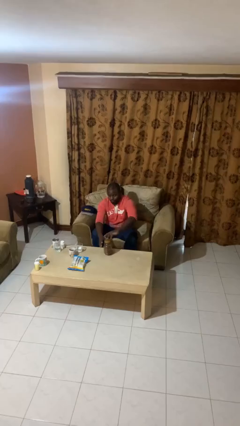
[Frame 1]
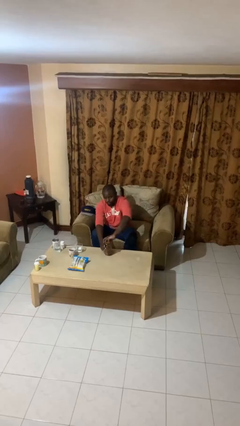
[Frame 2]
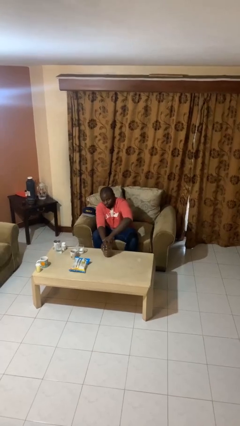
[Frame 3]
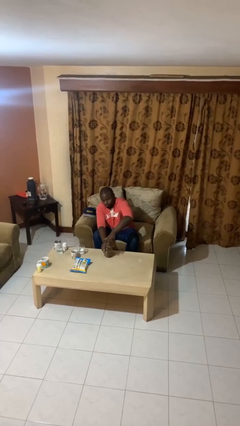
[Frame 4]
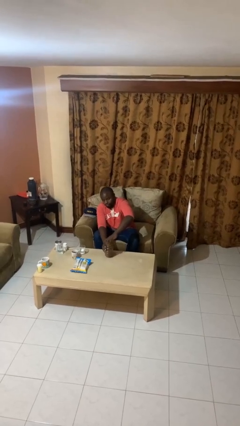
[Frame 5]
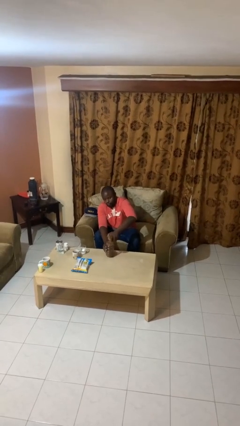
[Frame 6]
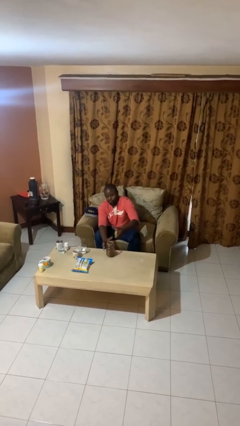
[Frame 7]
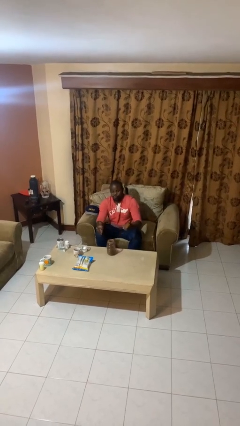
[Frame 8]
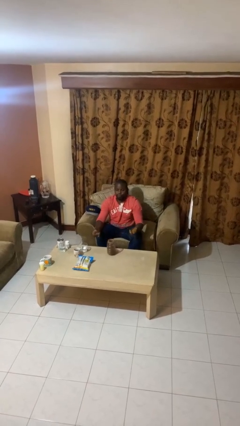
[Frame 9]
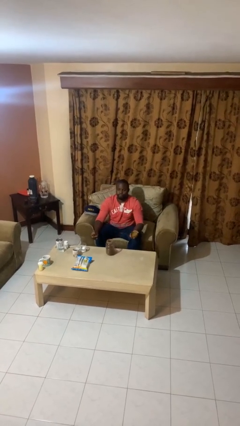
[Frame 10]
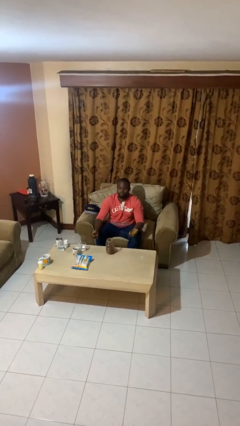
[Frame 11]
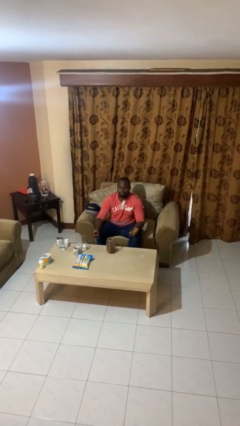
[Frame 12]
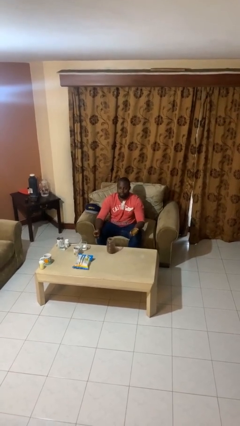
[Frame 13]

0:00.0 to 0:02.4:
person opens jar

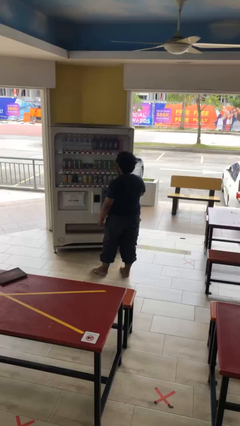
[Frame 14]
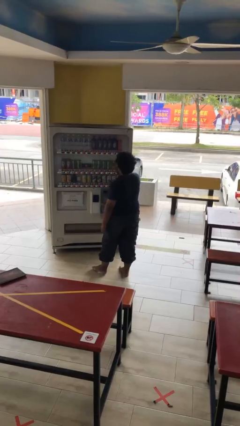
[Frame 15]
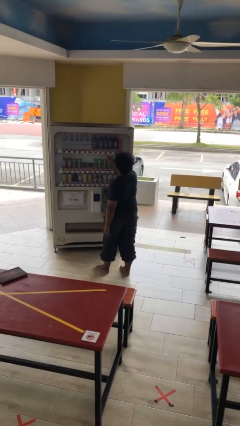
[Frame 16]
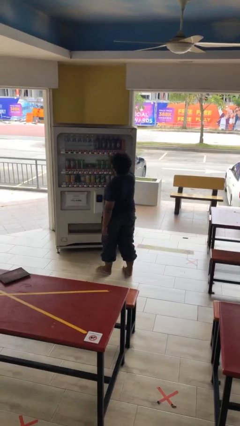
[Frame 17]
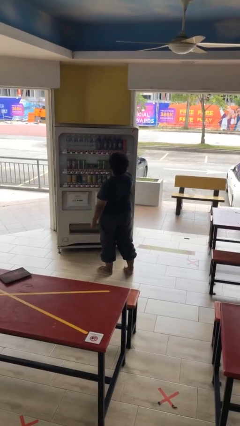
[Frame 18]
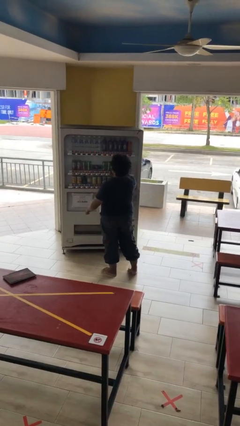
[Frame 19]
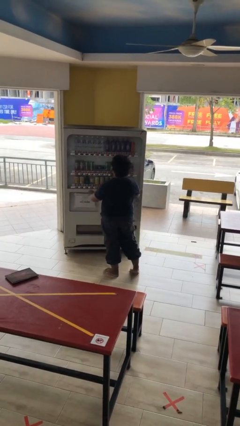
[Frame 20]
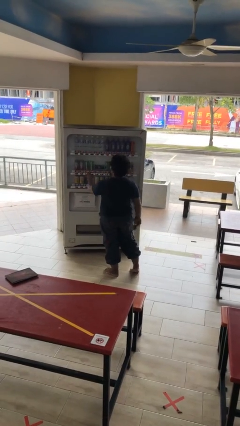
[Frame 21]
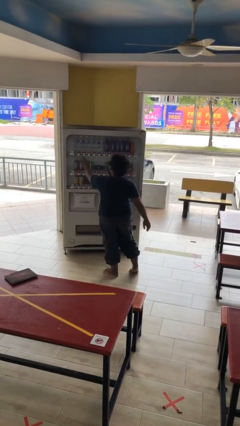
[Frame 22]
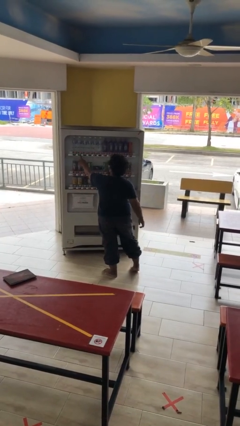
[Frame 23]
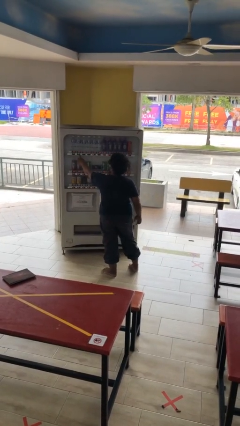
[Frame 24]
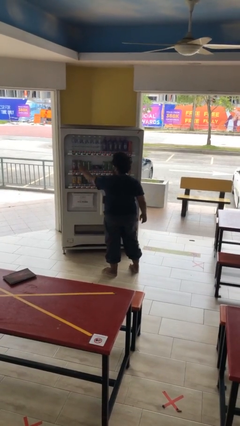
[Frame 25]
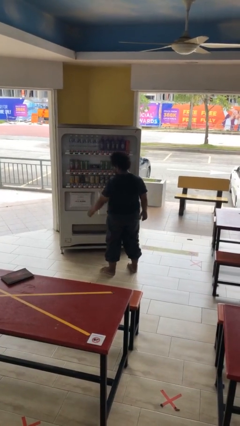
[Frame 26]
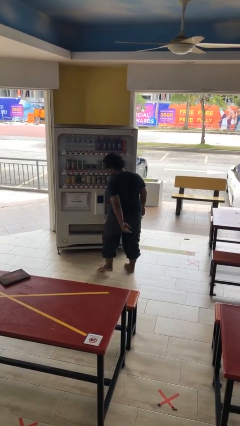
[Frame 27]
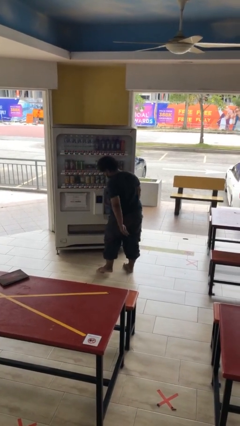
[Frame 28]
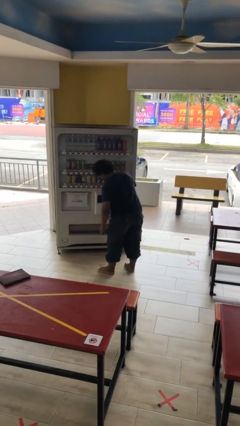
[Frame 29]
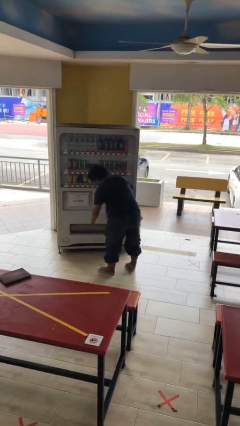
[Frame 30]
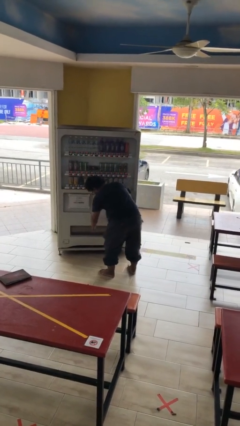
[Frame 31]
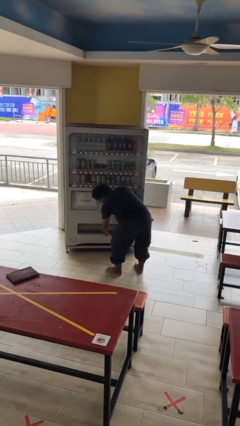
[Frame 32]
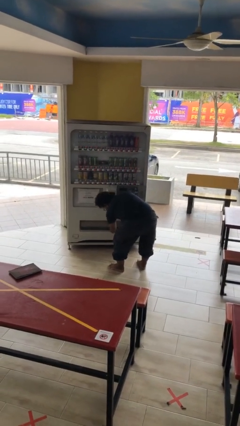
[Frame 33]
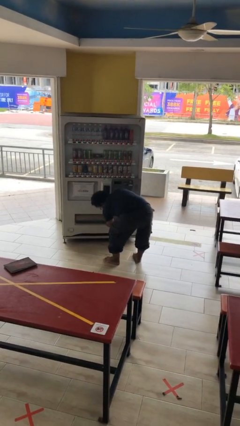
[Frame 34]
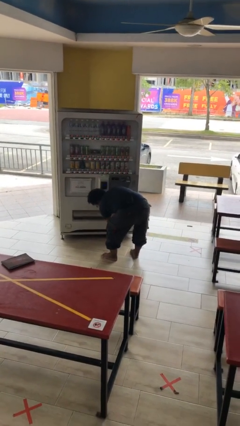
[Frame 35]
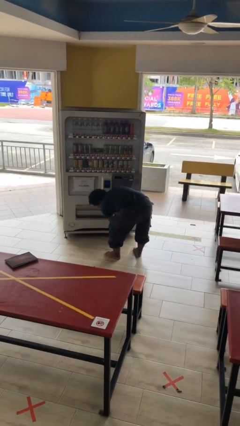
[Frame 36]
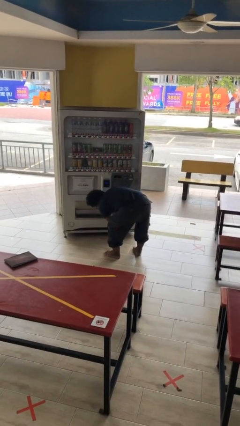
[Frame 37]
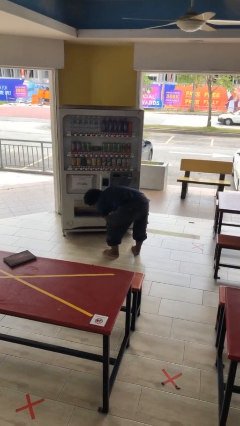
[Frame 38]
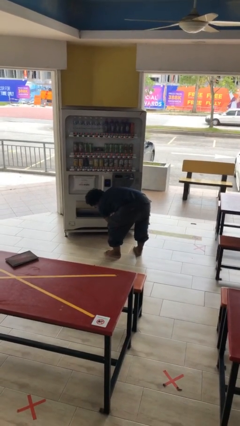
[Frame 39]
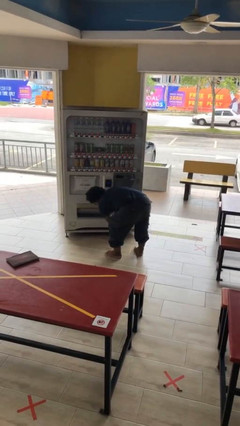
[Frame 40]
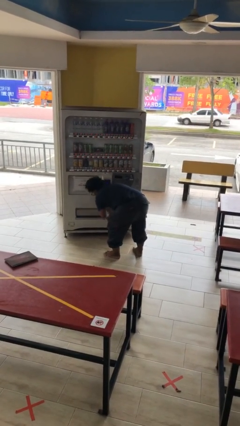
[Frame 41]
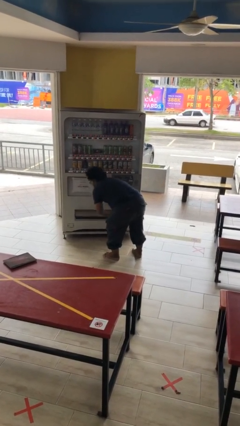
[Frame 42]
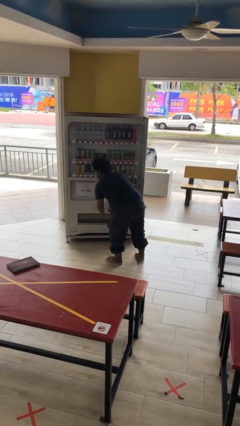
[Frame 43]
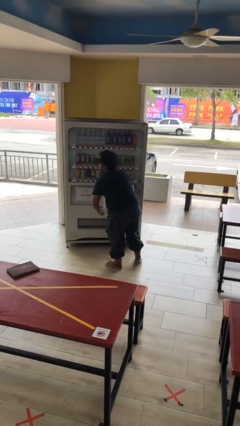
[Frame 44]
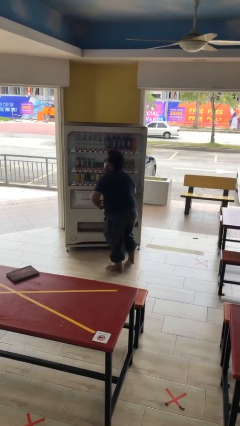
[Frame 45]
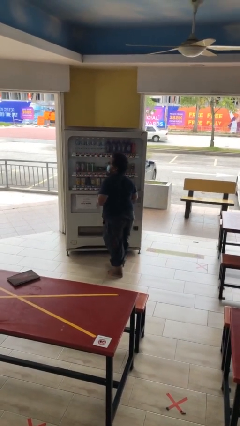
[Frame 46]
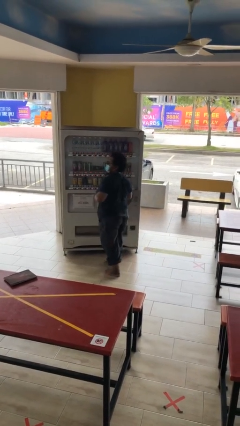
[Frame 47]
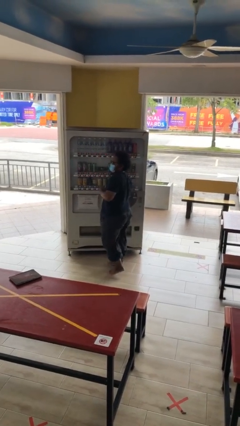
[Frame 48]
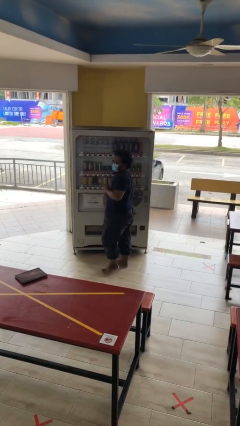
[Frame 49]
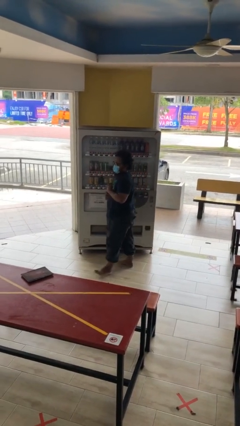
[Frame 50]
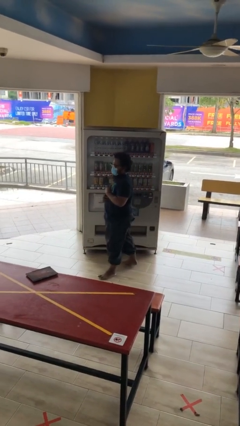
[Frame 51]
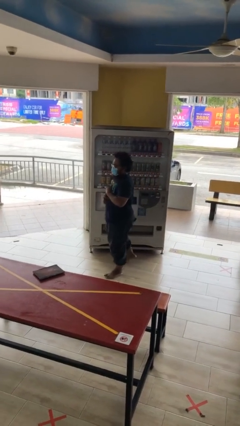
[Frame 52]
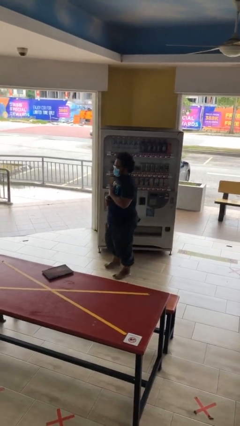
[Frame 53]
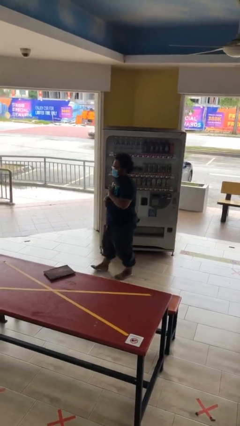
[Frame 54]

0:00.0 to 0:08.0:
person purchases from machine

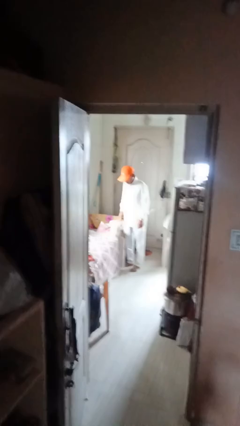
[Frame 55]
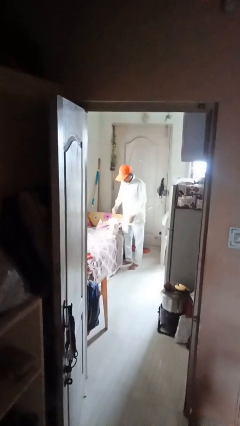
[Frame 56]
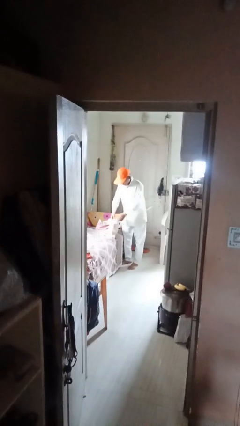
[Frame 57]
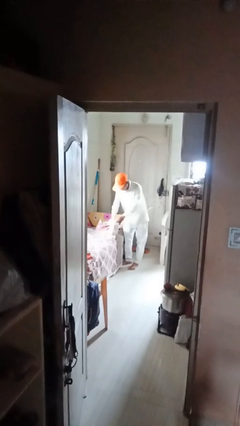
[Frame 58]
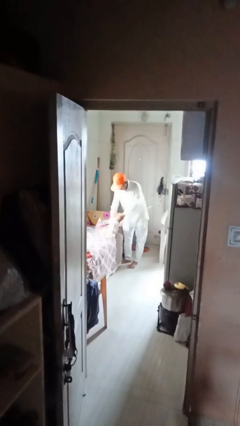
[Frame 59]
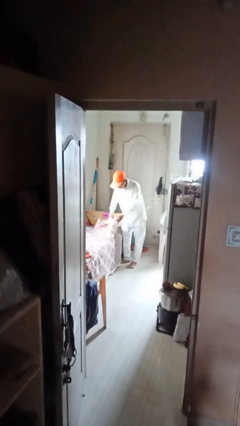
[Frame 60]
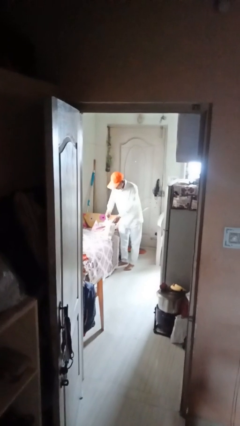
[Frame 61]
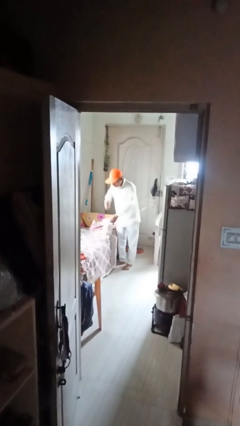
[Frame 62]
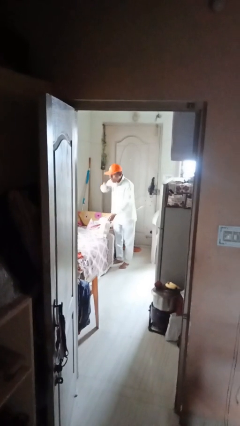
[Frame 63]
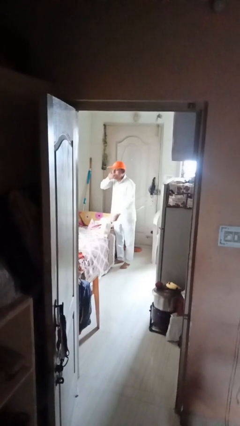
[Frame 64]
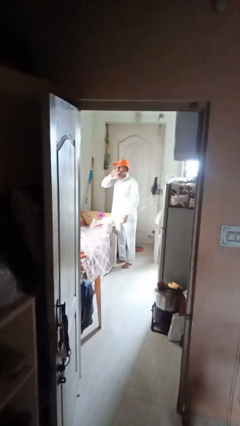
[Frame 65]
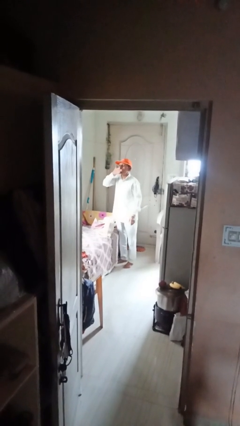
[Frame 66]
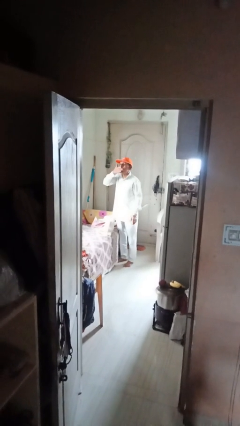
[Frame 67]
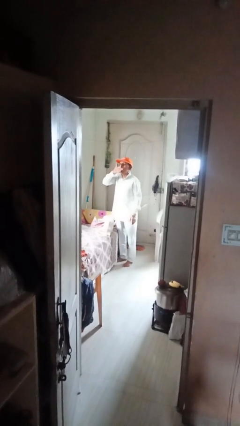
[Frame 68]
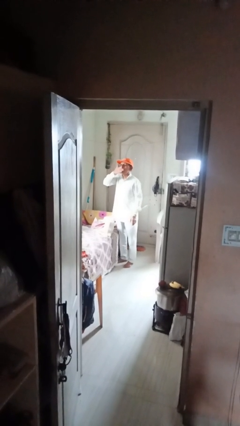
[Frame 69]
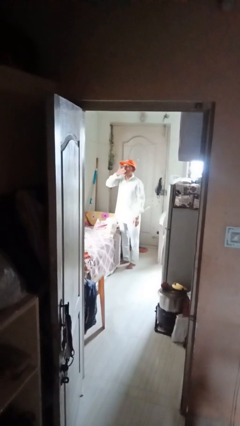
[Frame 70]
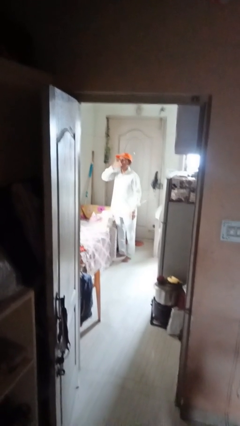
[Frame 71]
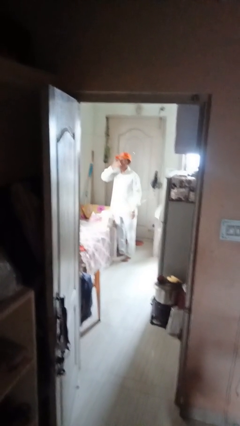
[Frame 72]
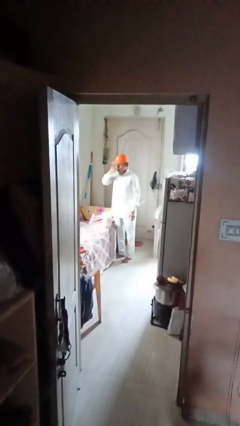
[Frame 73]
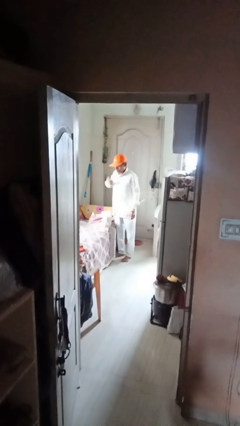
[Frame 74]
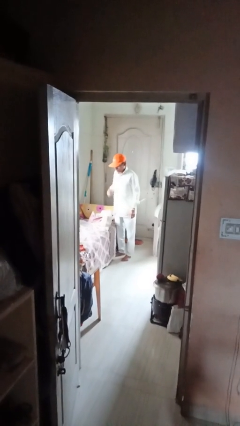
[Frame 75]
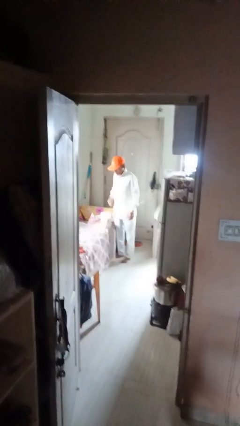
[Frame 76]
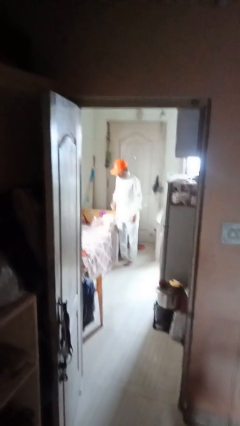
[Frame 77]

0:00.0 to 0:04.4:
person eats snack from bag

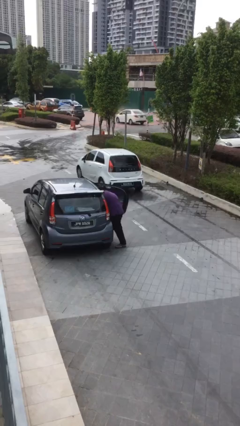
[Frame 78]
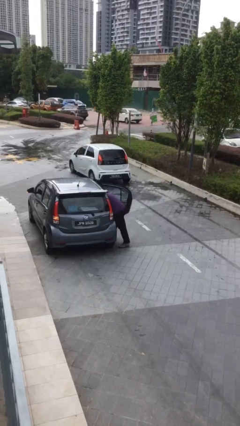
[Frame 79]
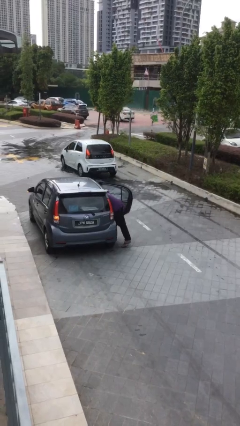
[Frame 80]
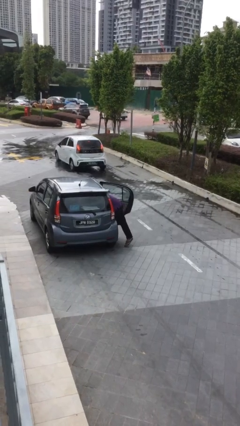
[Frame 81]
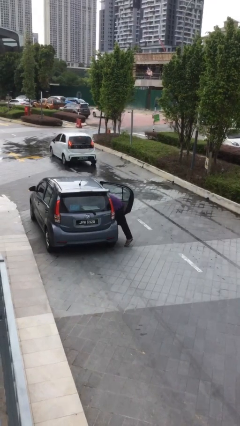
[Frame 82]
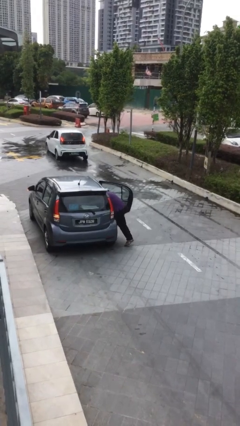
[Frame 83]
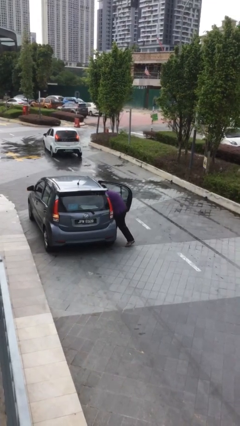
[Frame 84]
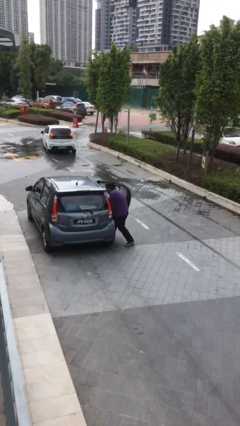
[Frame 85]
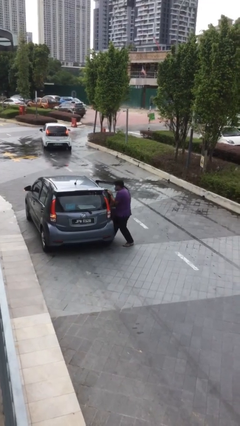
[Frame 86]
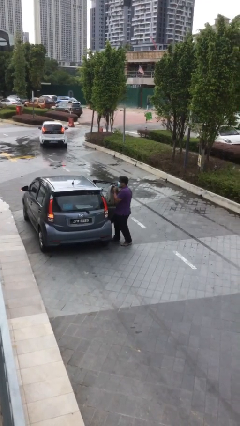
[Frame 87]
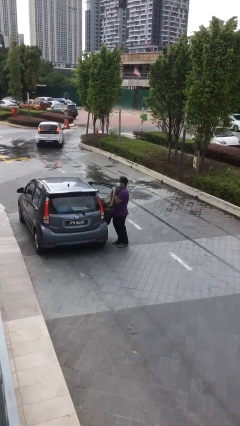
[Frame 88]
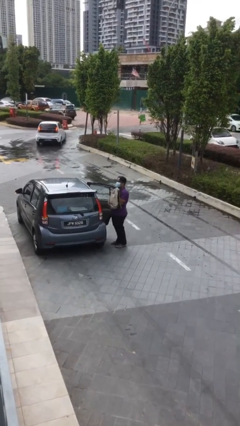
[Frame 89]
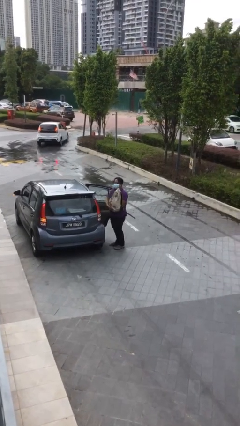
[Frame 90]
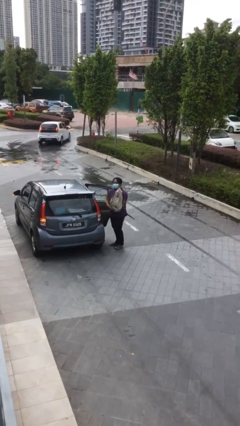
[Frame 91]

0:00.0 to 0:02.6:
person unloads car

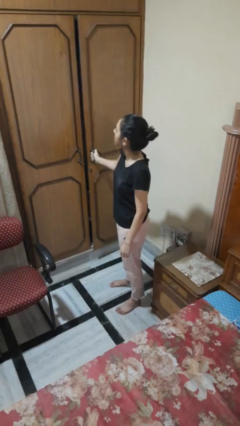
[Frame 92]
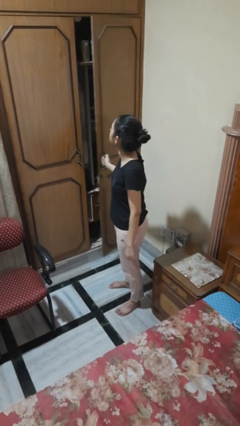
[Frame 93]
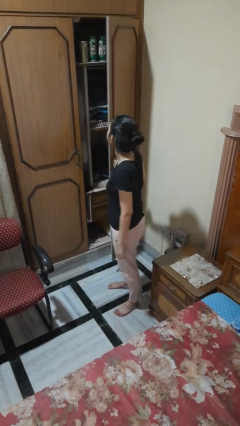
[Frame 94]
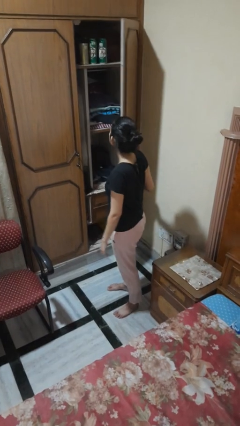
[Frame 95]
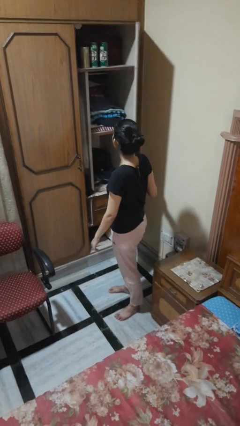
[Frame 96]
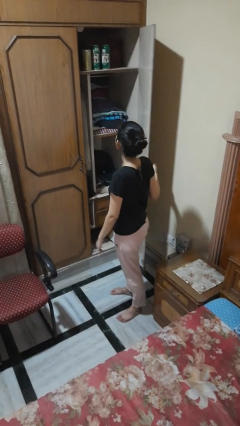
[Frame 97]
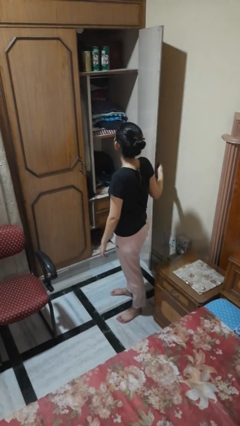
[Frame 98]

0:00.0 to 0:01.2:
person opens closet door
